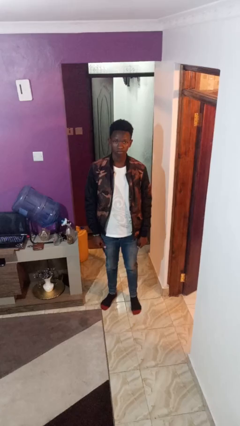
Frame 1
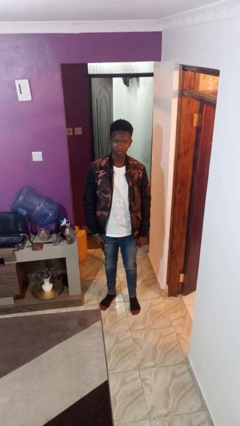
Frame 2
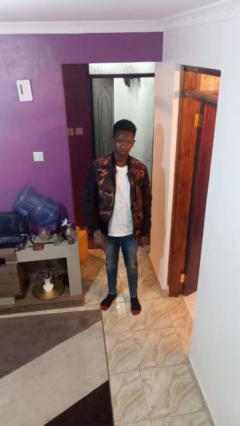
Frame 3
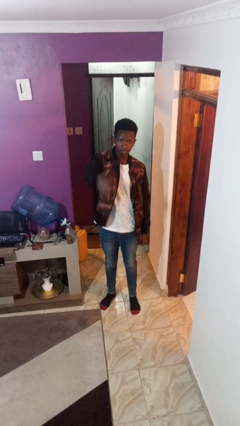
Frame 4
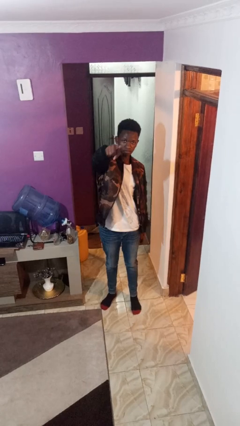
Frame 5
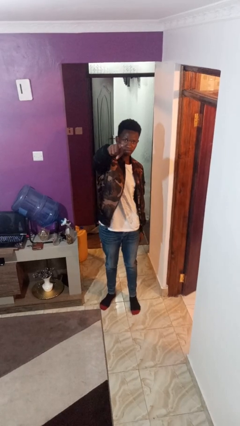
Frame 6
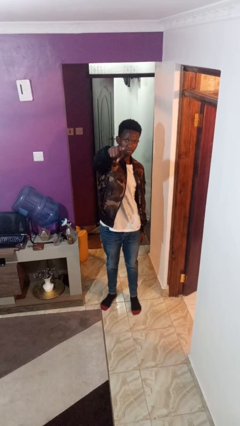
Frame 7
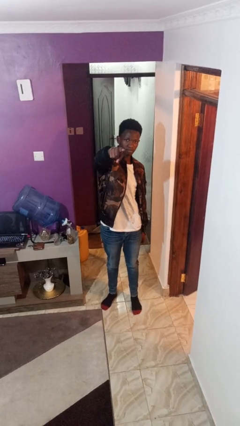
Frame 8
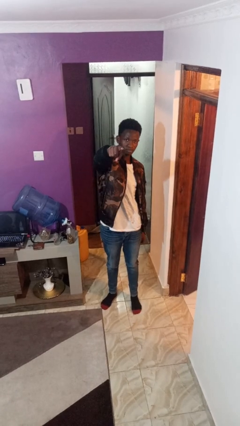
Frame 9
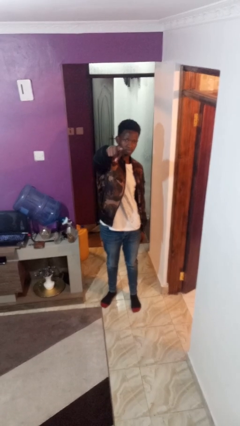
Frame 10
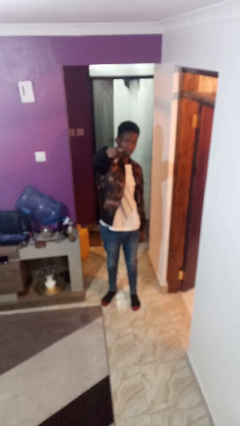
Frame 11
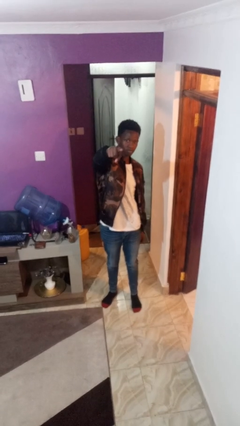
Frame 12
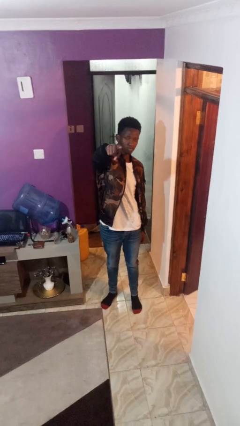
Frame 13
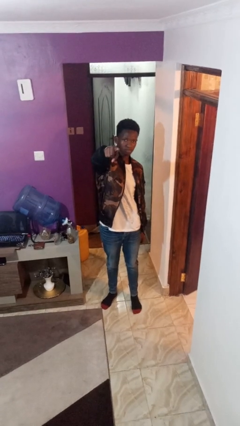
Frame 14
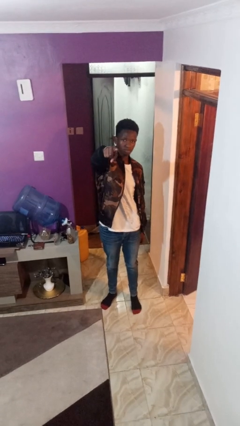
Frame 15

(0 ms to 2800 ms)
person points at person

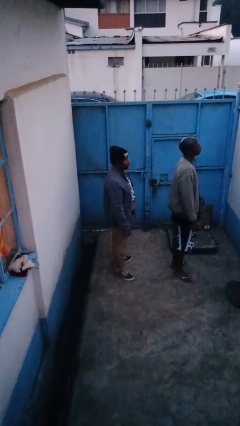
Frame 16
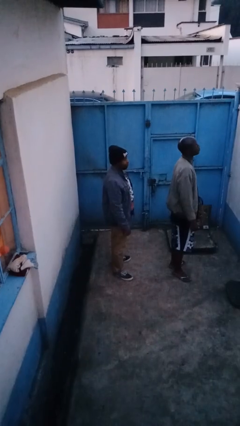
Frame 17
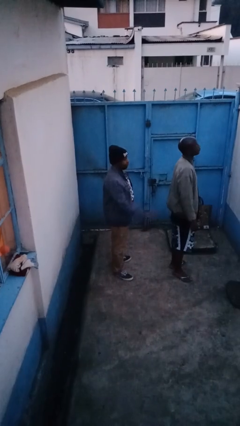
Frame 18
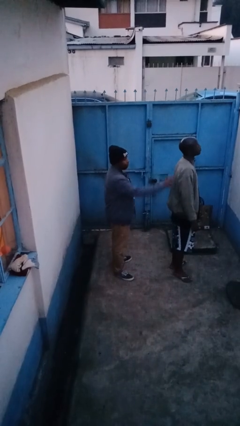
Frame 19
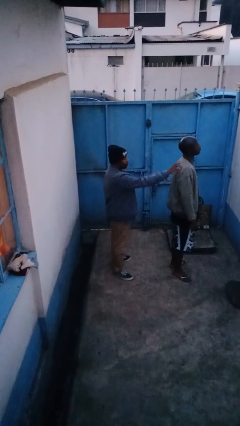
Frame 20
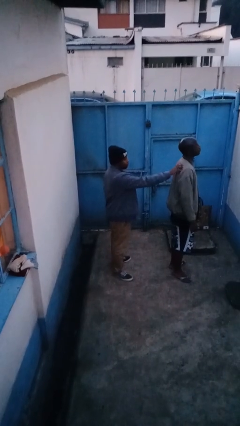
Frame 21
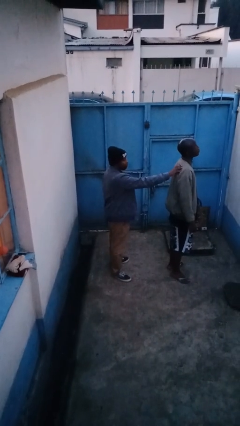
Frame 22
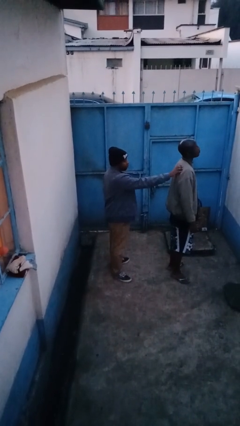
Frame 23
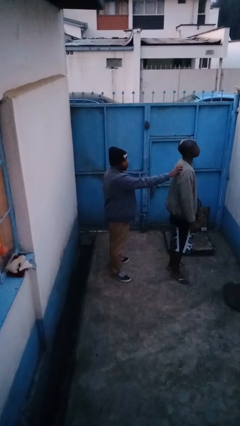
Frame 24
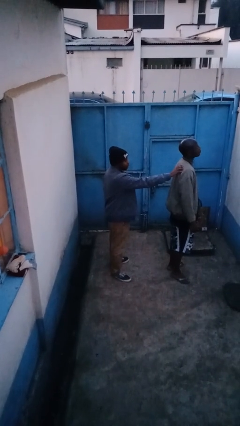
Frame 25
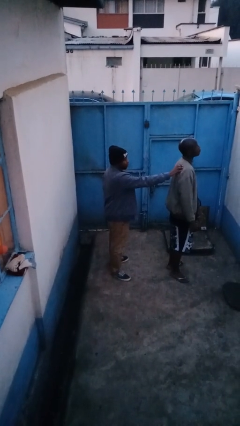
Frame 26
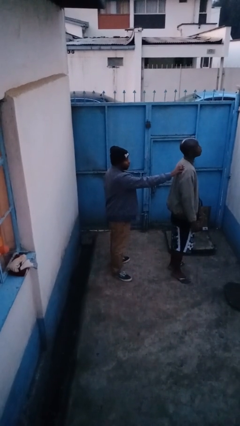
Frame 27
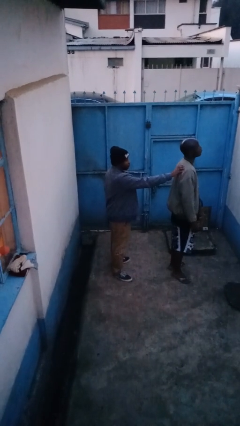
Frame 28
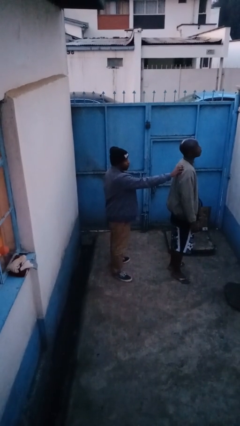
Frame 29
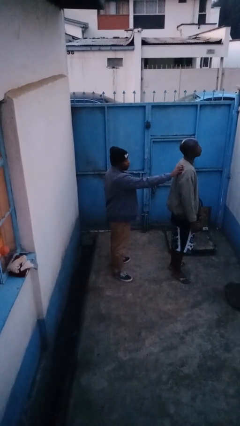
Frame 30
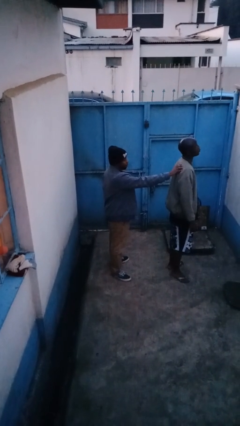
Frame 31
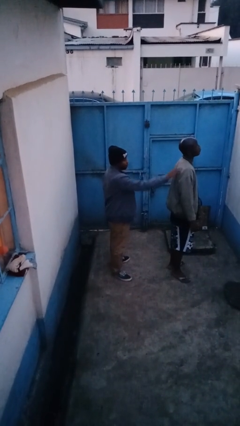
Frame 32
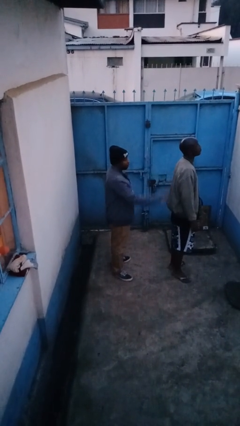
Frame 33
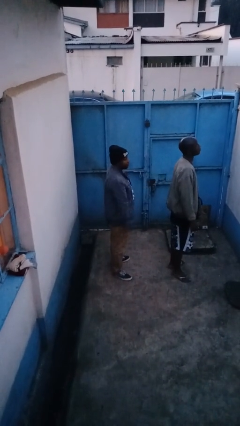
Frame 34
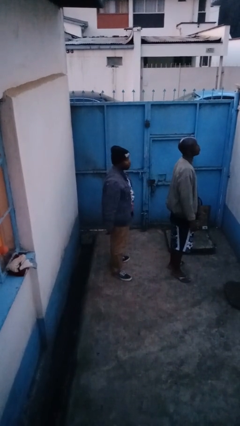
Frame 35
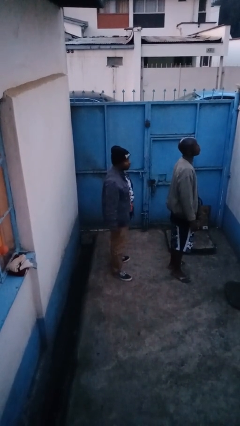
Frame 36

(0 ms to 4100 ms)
person touches back of person

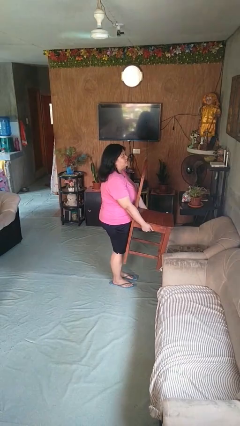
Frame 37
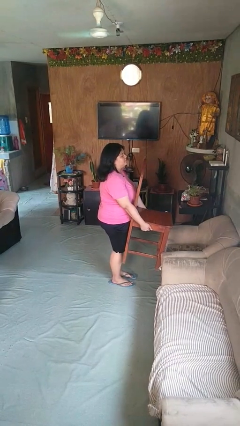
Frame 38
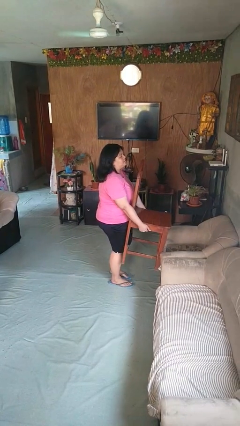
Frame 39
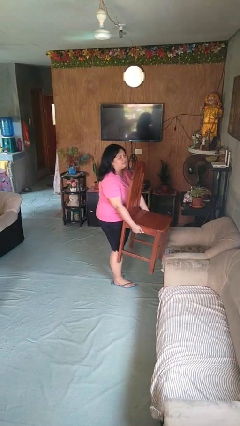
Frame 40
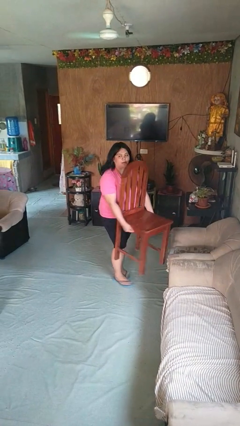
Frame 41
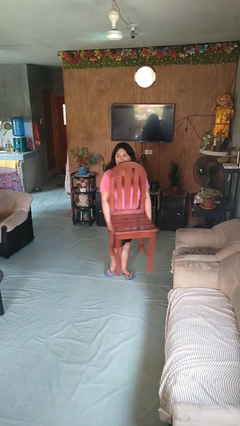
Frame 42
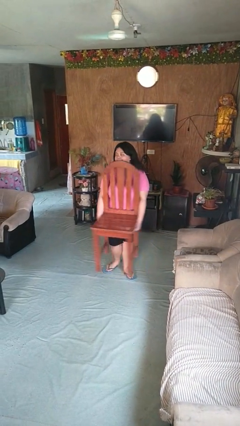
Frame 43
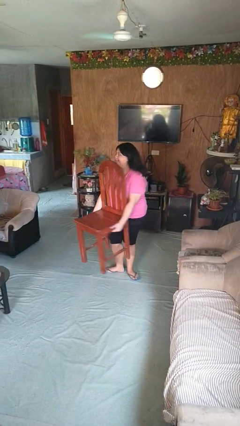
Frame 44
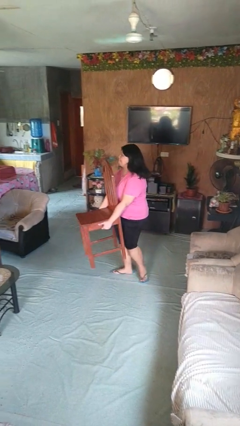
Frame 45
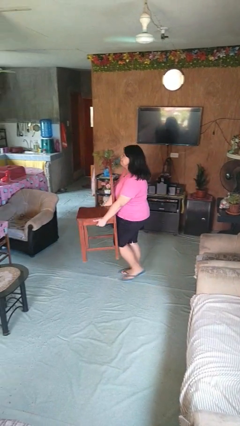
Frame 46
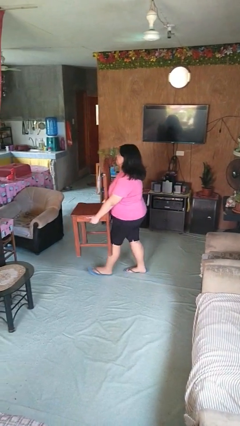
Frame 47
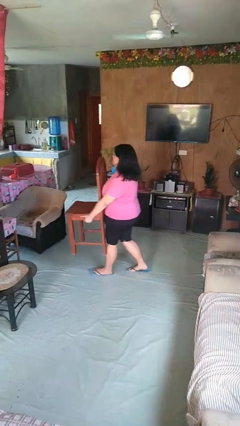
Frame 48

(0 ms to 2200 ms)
person carries furniture

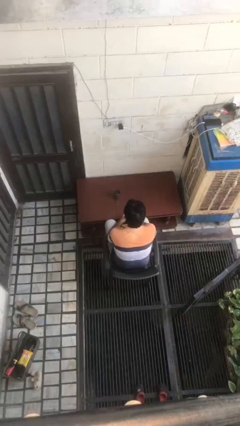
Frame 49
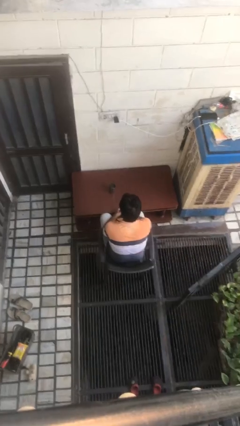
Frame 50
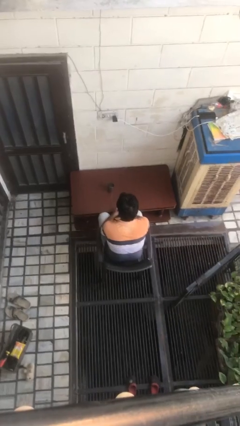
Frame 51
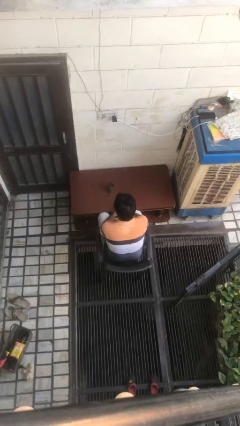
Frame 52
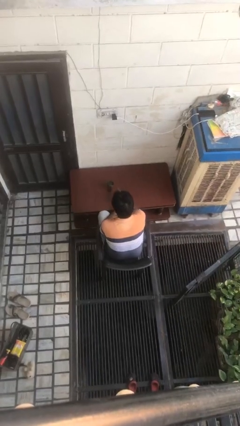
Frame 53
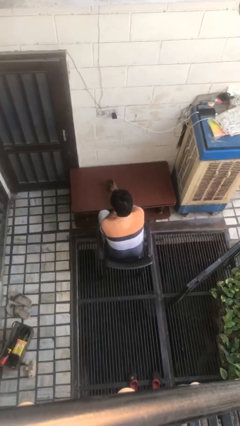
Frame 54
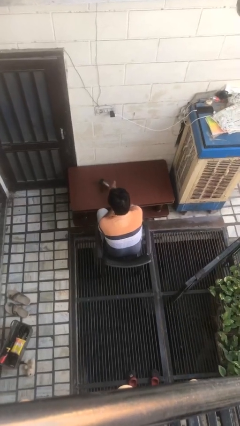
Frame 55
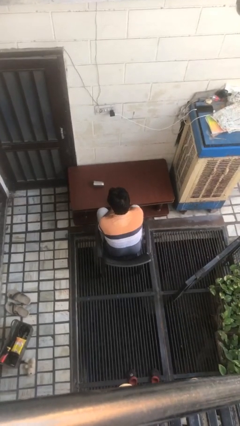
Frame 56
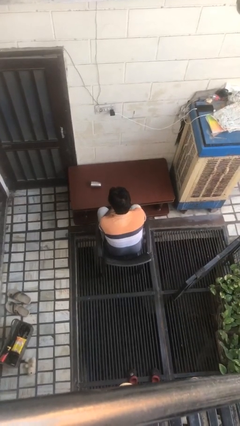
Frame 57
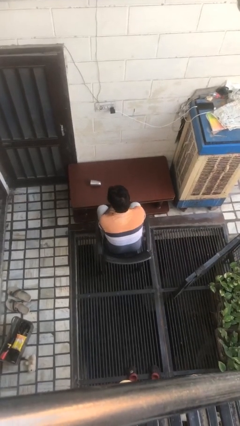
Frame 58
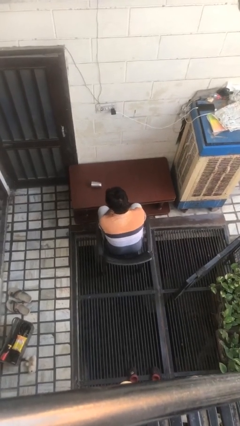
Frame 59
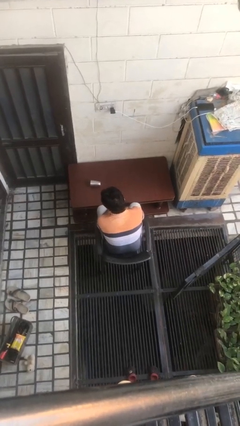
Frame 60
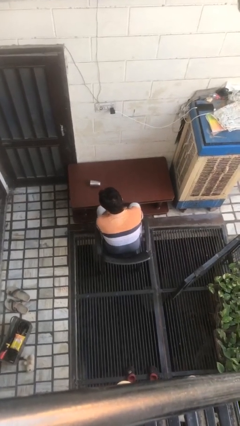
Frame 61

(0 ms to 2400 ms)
person knocks over glass

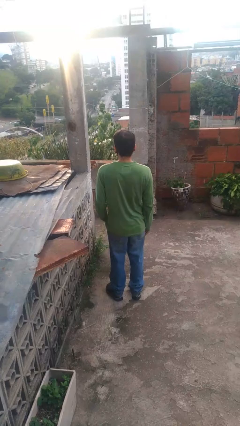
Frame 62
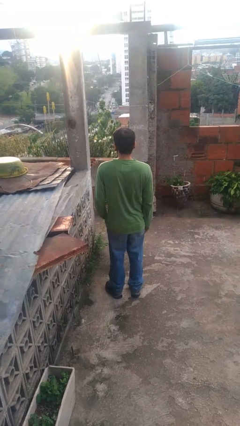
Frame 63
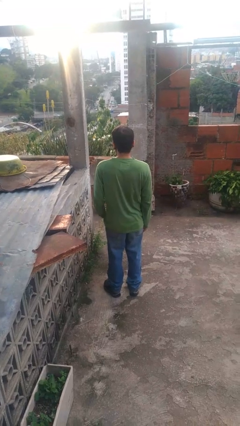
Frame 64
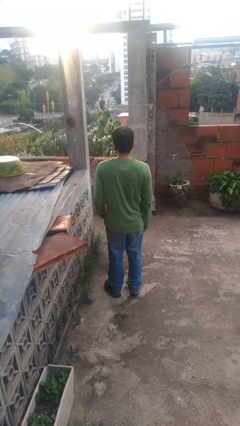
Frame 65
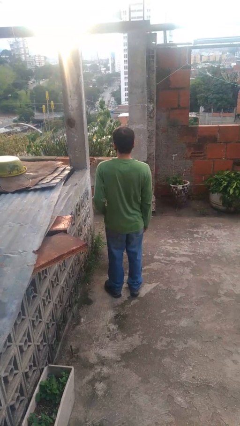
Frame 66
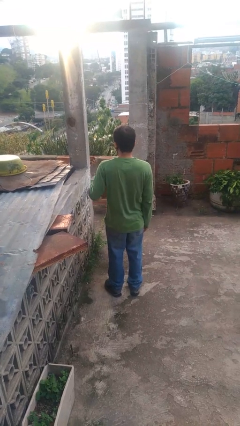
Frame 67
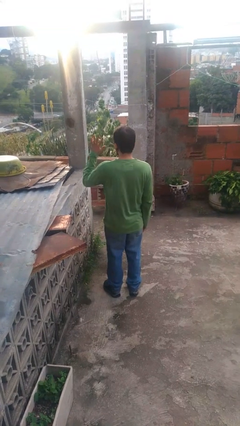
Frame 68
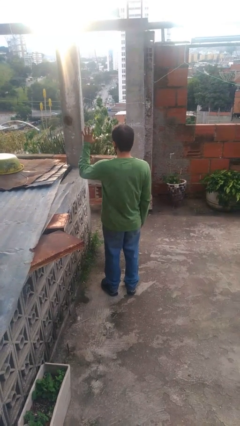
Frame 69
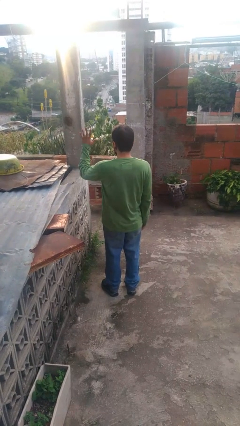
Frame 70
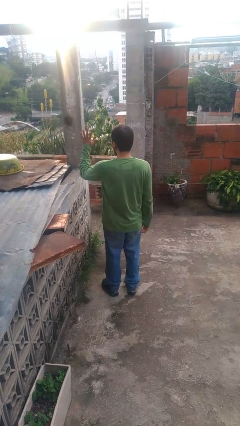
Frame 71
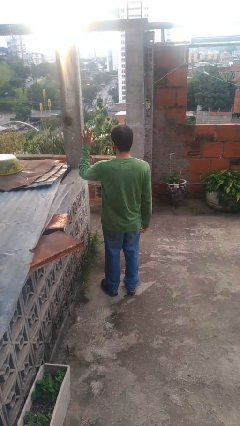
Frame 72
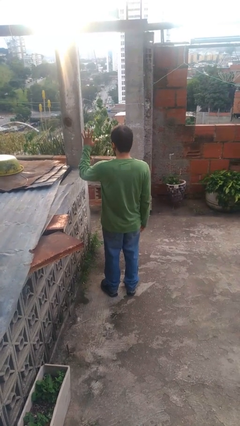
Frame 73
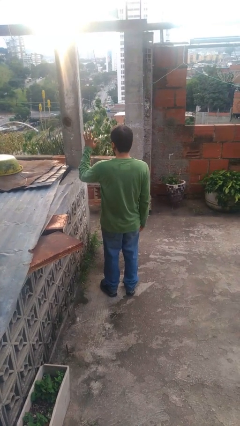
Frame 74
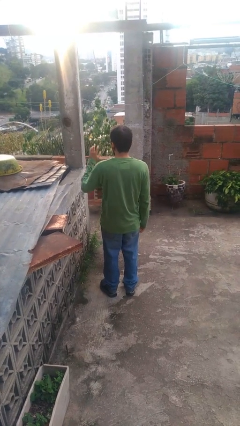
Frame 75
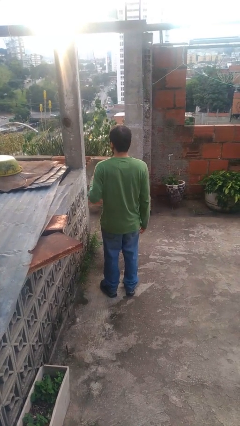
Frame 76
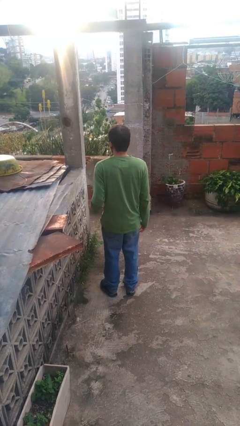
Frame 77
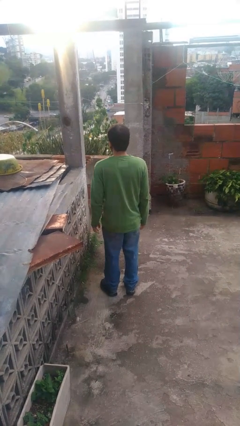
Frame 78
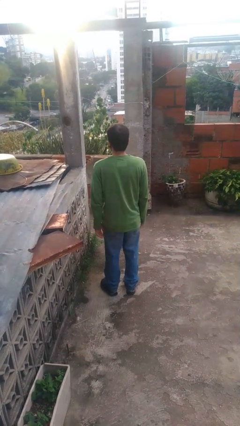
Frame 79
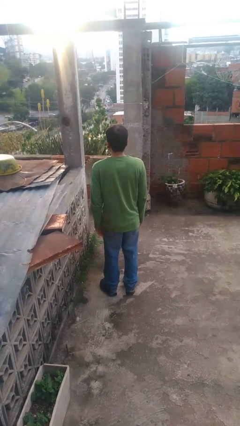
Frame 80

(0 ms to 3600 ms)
person gestures number five

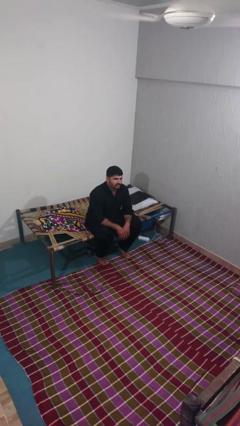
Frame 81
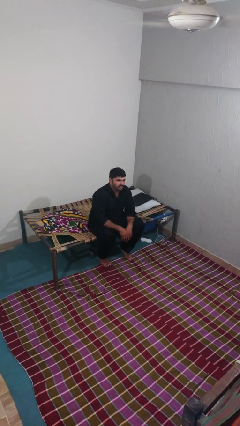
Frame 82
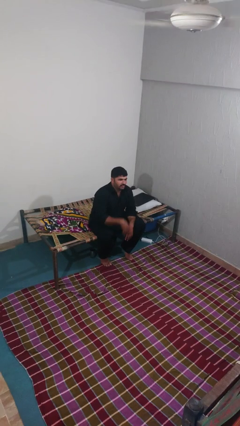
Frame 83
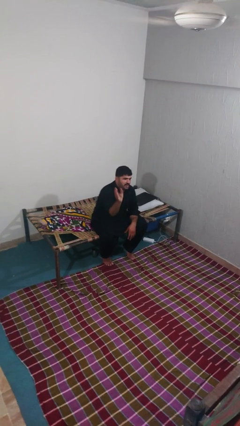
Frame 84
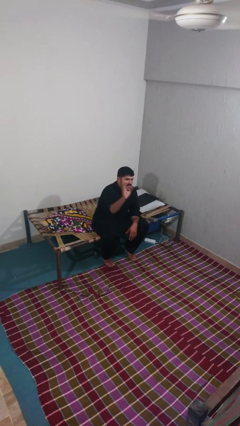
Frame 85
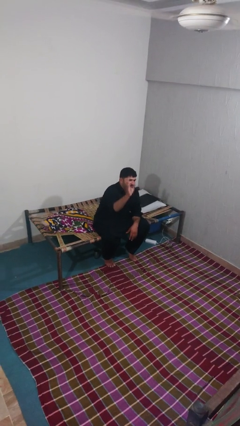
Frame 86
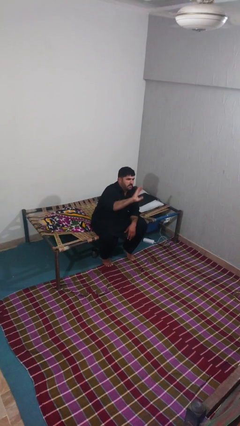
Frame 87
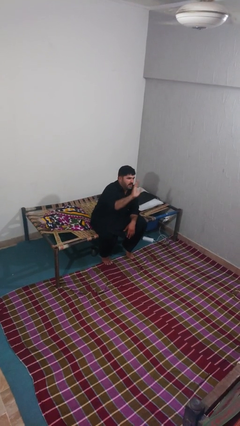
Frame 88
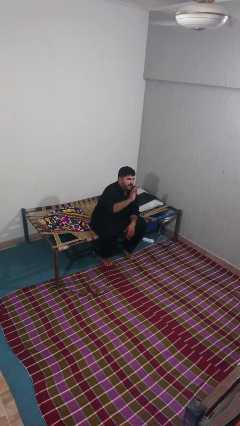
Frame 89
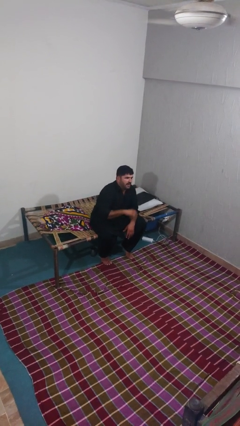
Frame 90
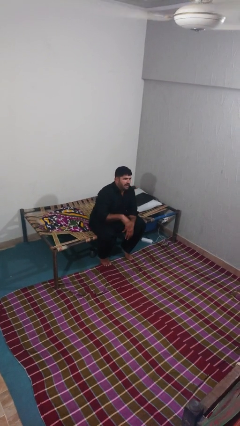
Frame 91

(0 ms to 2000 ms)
person waves at person

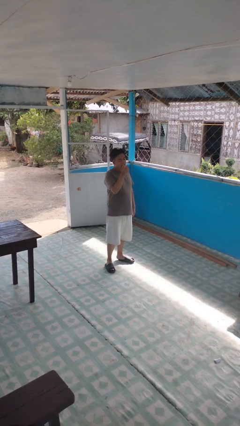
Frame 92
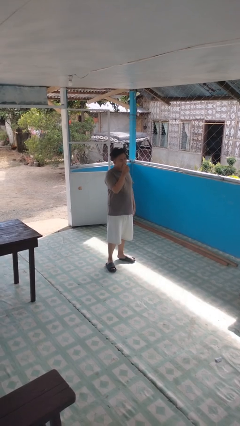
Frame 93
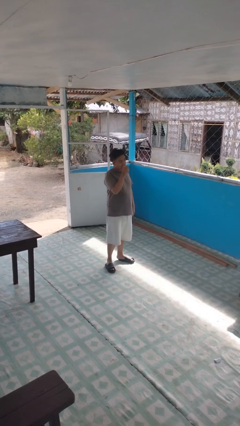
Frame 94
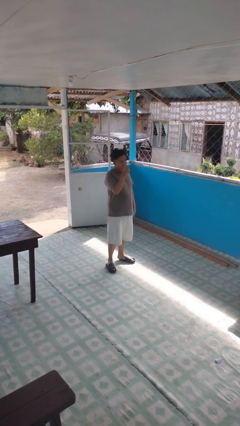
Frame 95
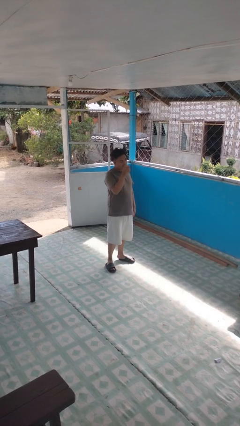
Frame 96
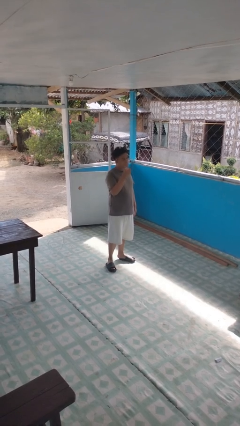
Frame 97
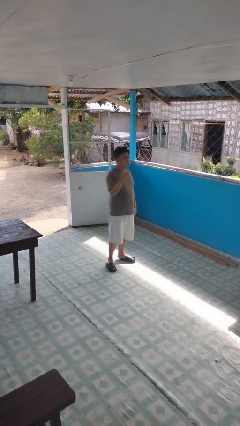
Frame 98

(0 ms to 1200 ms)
person eats apple
